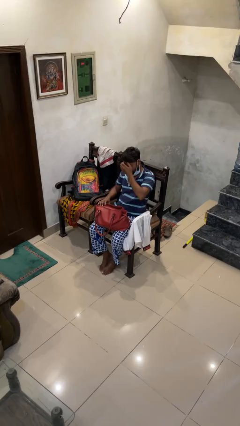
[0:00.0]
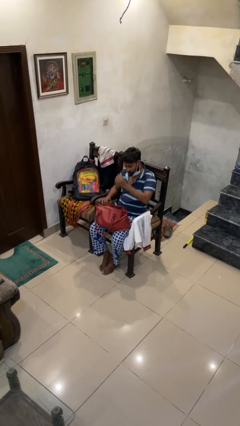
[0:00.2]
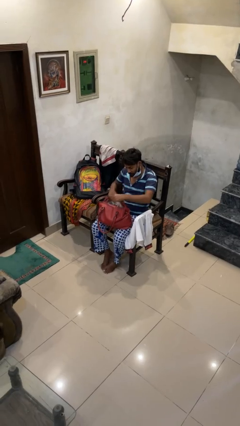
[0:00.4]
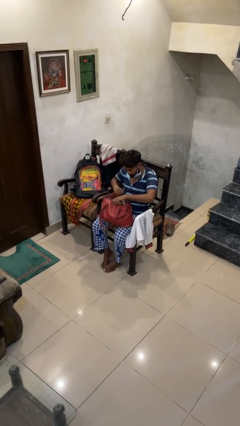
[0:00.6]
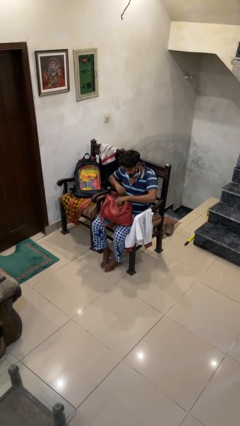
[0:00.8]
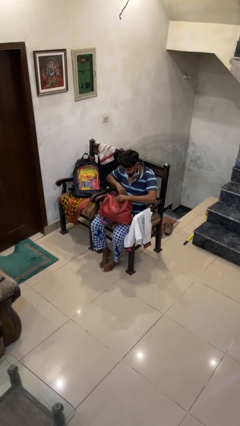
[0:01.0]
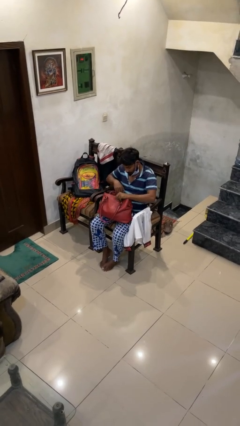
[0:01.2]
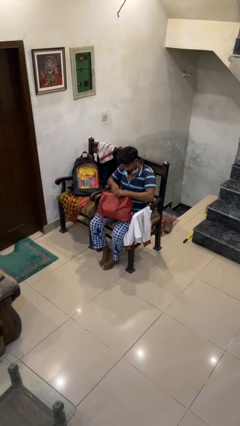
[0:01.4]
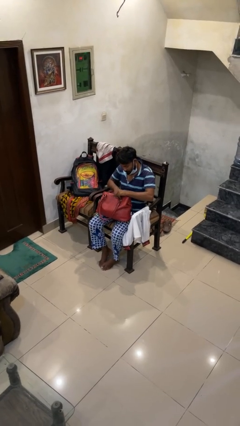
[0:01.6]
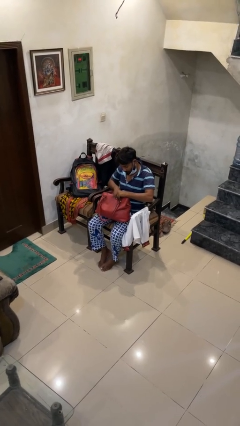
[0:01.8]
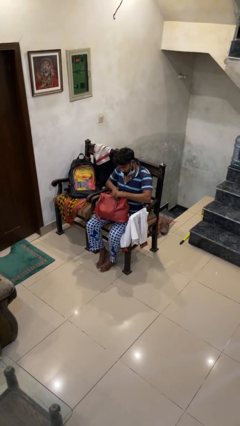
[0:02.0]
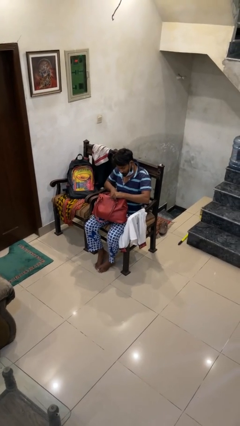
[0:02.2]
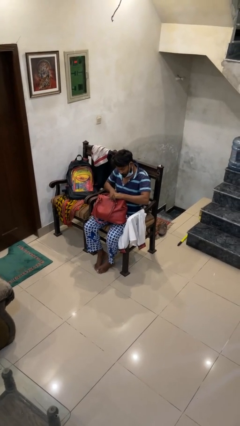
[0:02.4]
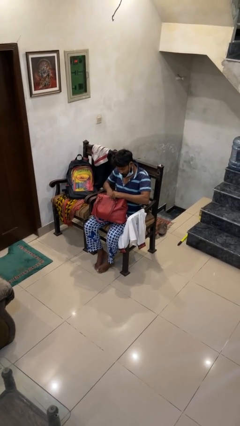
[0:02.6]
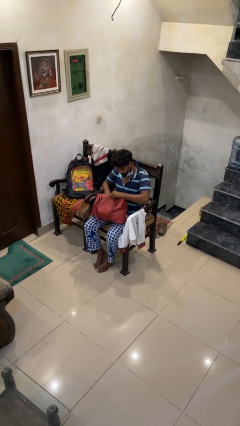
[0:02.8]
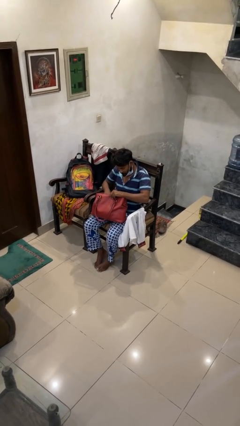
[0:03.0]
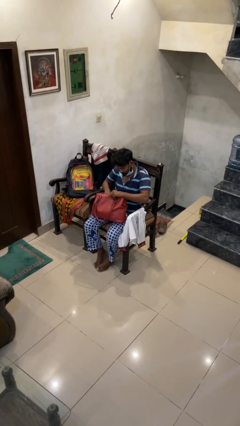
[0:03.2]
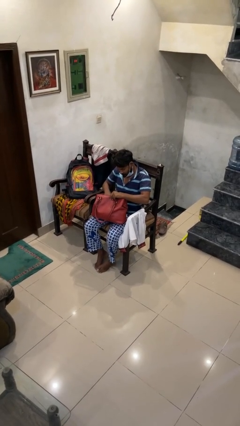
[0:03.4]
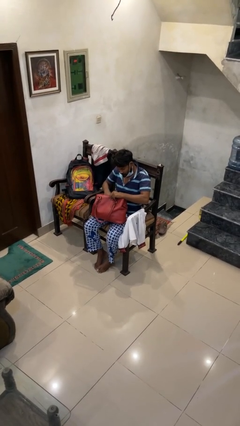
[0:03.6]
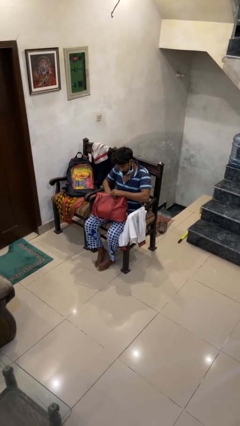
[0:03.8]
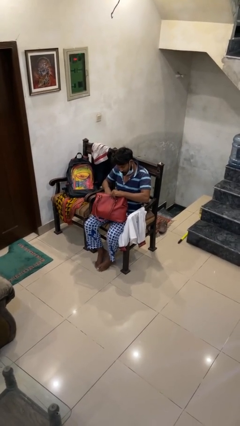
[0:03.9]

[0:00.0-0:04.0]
person searches in purse

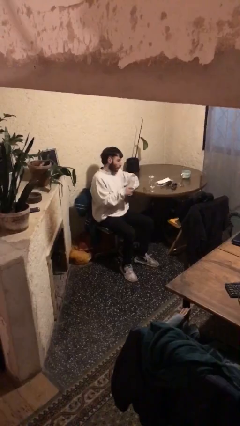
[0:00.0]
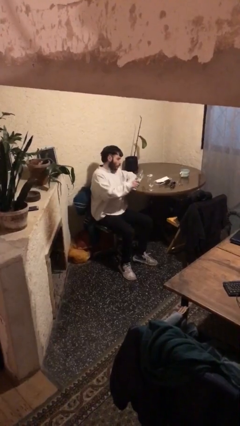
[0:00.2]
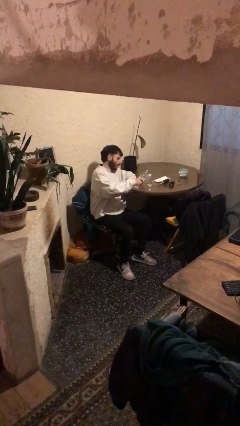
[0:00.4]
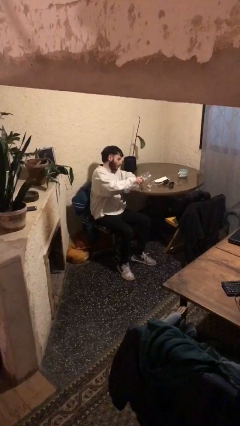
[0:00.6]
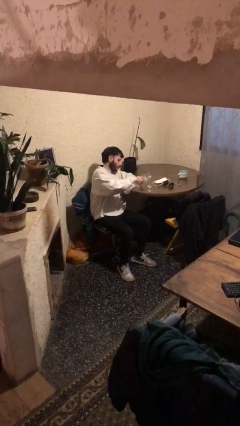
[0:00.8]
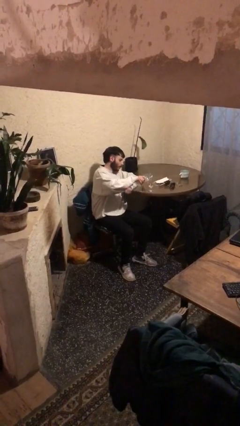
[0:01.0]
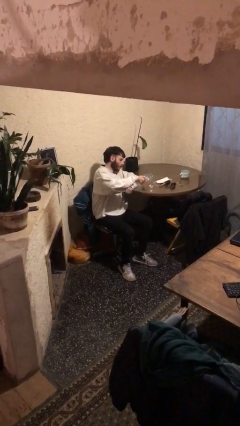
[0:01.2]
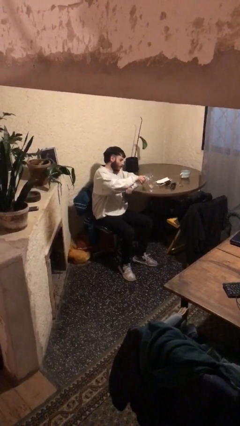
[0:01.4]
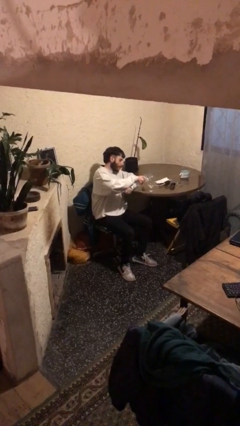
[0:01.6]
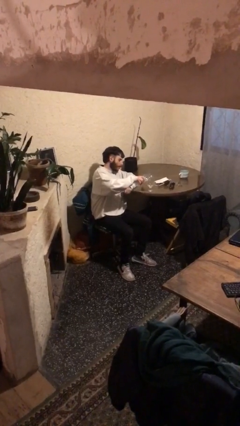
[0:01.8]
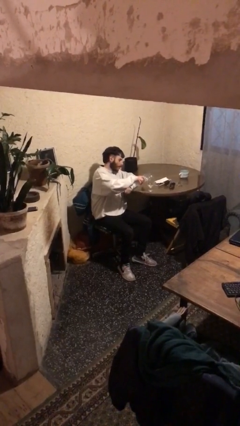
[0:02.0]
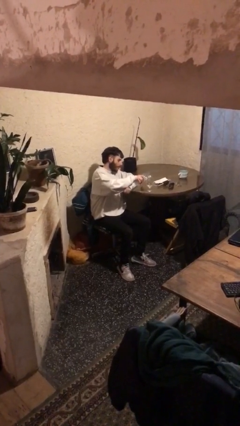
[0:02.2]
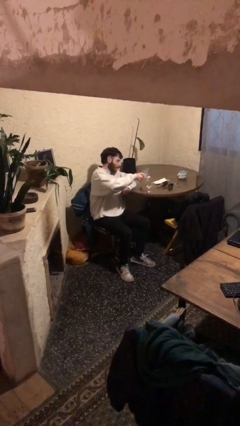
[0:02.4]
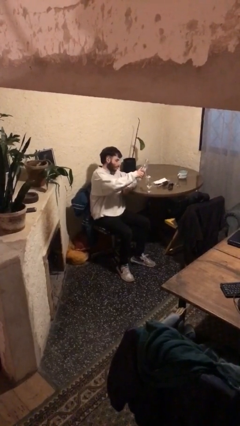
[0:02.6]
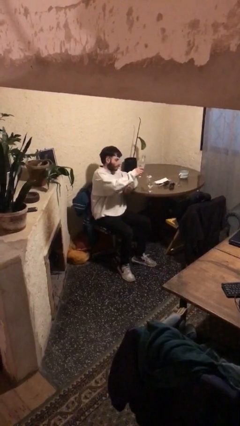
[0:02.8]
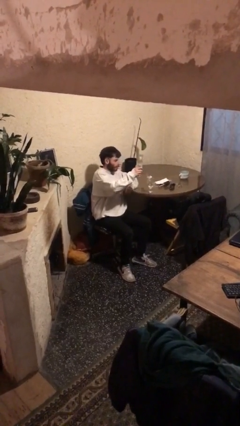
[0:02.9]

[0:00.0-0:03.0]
person pours liquid into cup

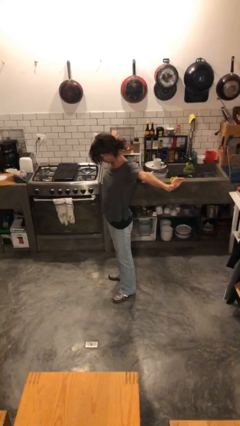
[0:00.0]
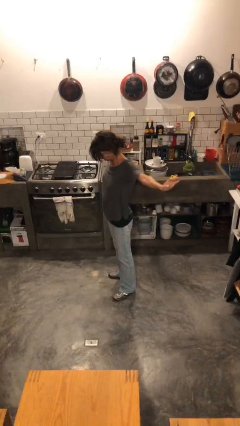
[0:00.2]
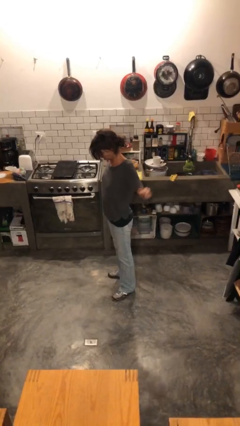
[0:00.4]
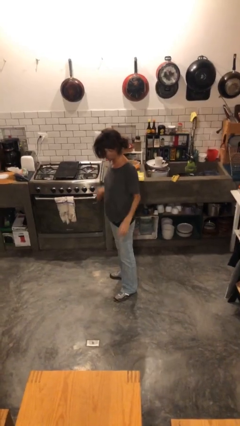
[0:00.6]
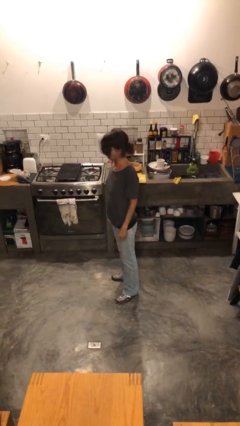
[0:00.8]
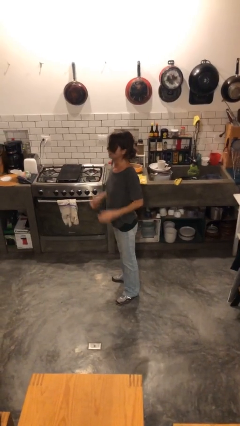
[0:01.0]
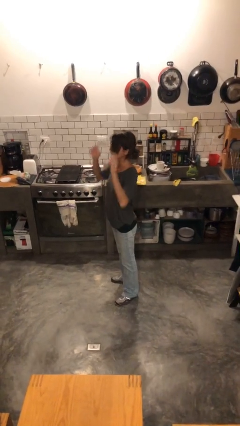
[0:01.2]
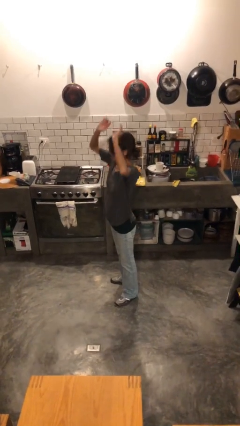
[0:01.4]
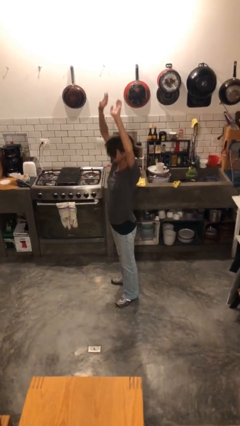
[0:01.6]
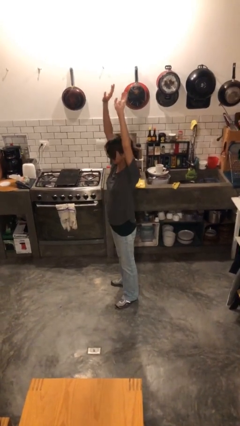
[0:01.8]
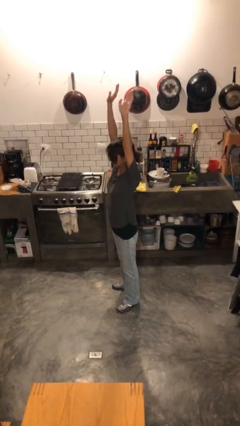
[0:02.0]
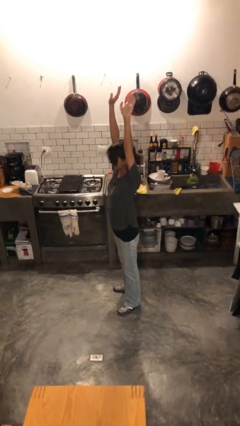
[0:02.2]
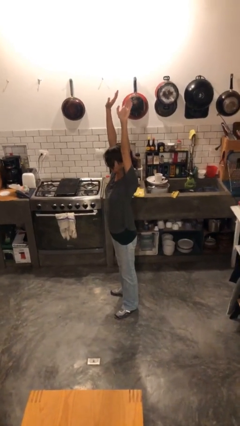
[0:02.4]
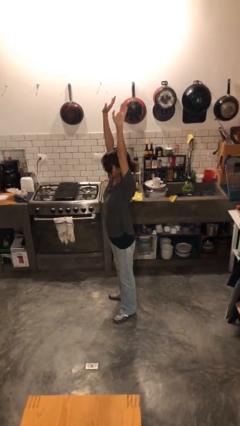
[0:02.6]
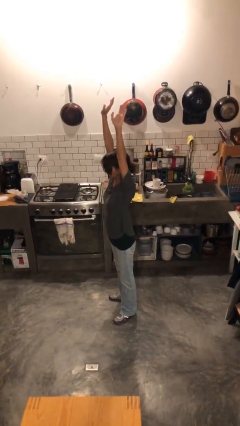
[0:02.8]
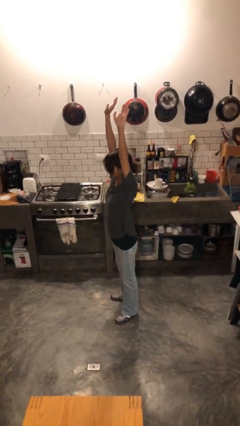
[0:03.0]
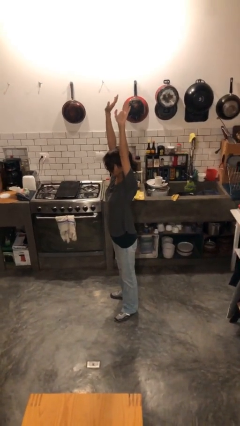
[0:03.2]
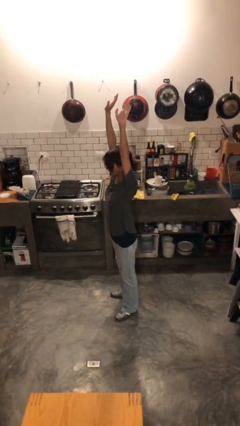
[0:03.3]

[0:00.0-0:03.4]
person stretches arms over head

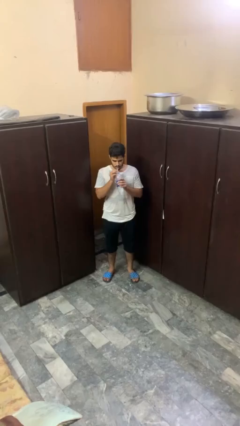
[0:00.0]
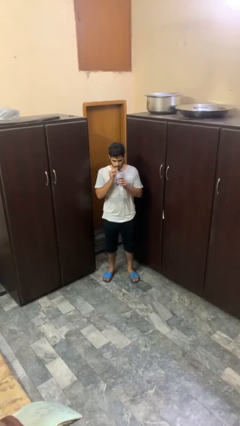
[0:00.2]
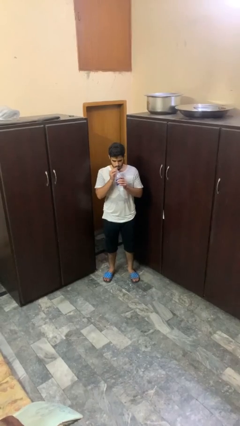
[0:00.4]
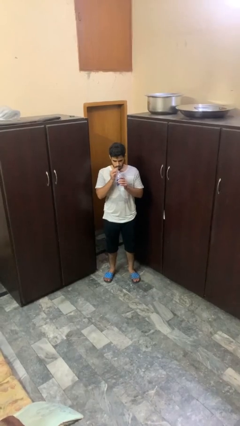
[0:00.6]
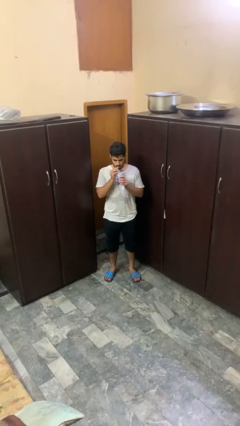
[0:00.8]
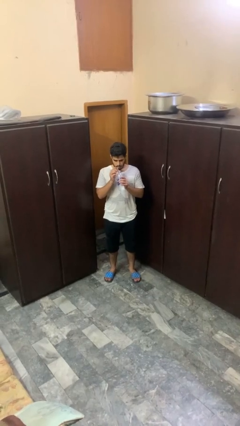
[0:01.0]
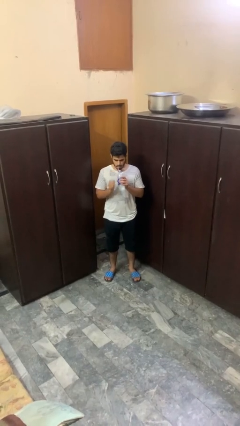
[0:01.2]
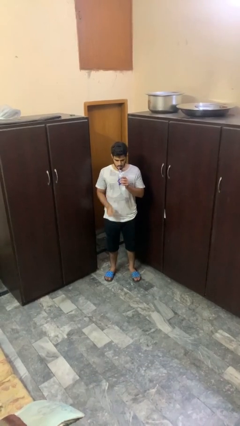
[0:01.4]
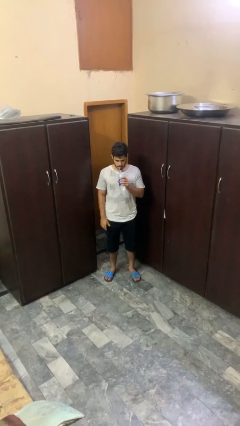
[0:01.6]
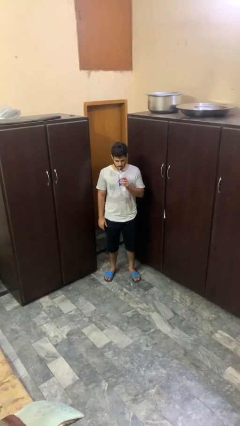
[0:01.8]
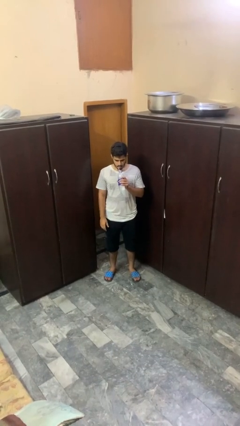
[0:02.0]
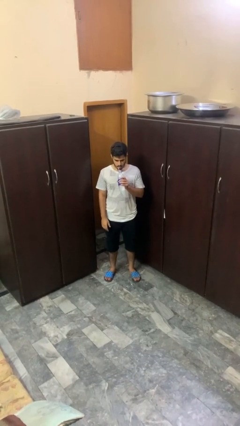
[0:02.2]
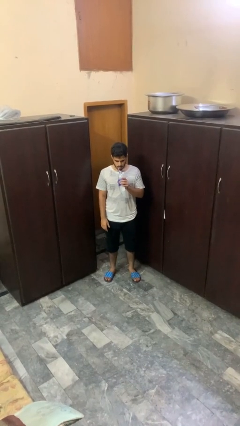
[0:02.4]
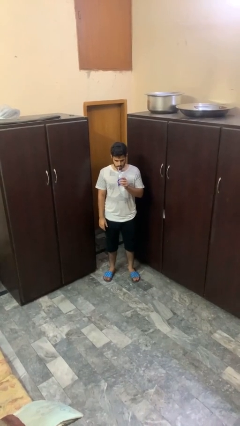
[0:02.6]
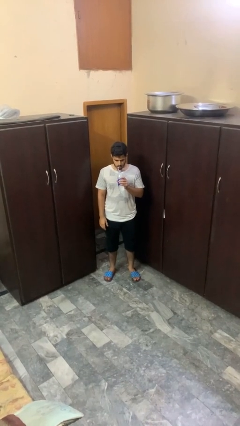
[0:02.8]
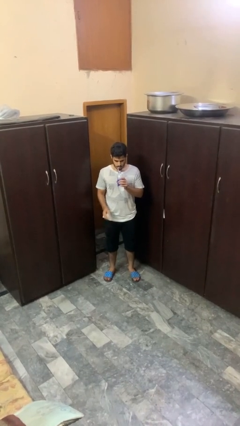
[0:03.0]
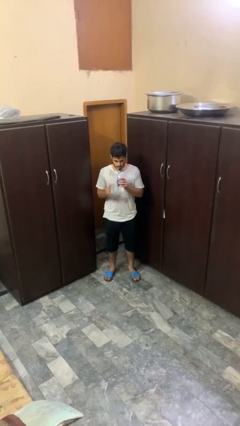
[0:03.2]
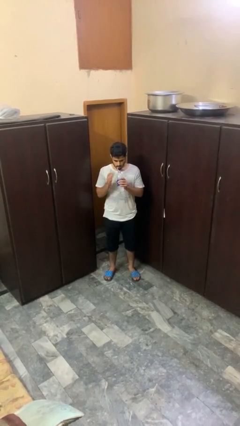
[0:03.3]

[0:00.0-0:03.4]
person drinks from straw

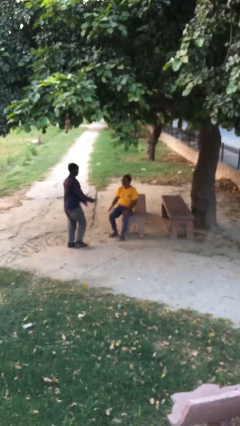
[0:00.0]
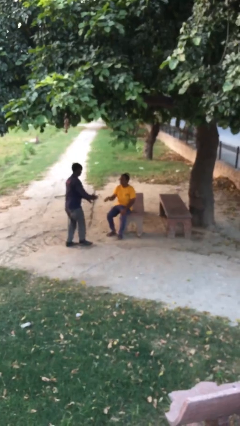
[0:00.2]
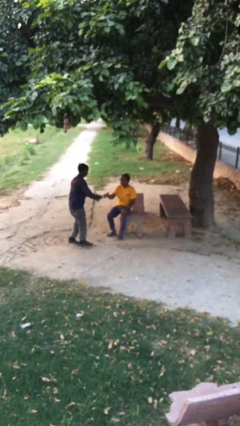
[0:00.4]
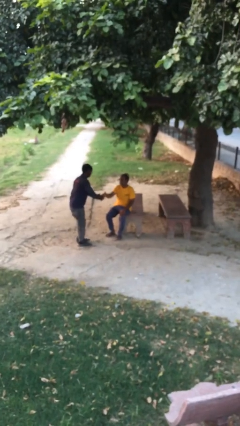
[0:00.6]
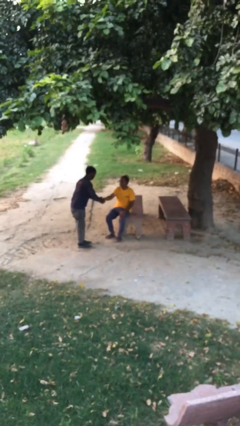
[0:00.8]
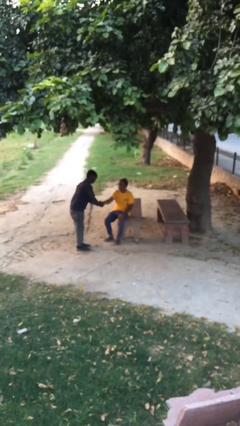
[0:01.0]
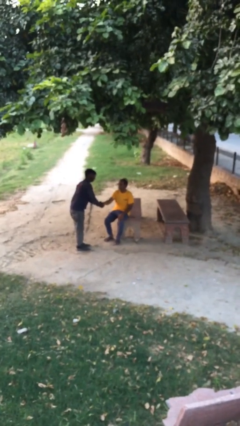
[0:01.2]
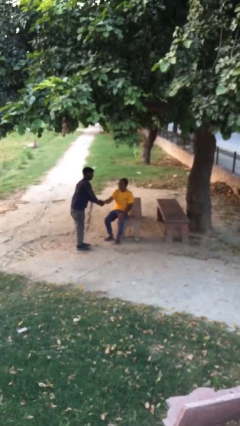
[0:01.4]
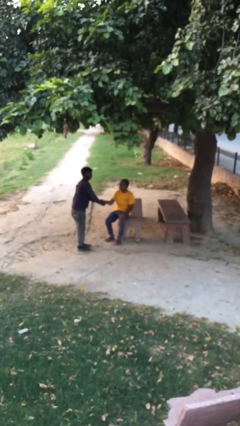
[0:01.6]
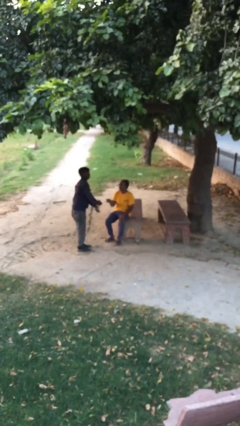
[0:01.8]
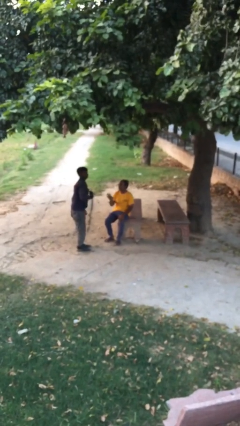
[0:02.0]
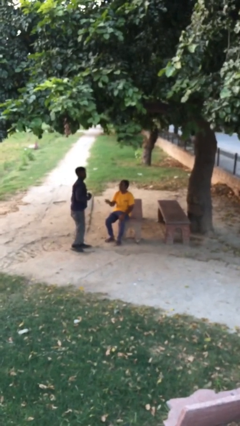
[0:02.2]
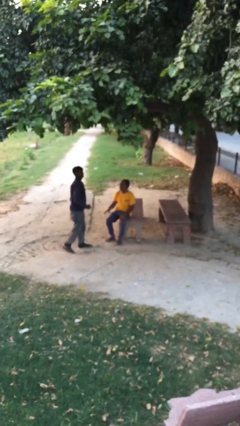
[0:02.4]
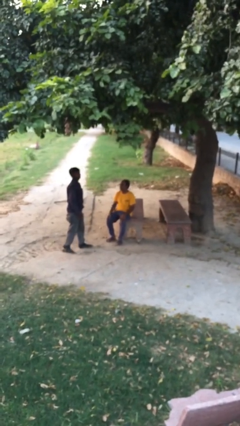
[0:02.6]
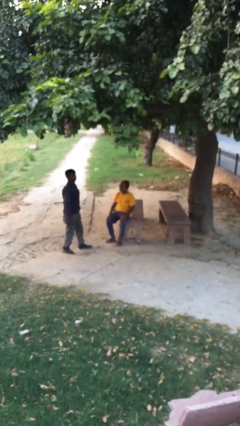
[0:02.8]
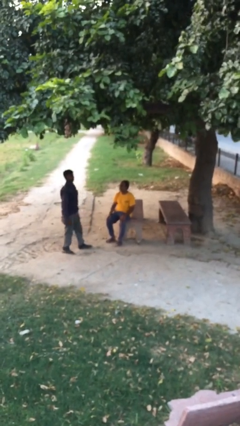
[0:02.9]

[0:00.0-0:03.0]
person shakes hand

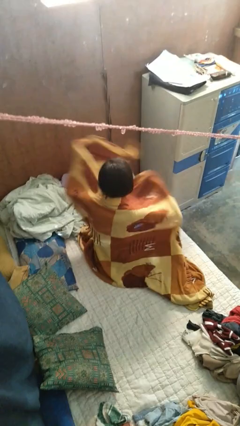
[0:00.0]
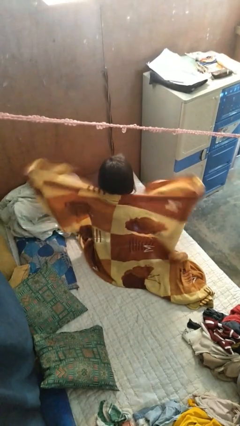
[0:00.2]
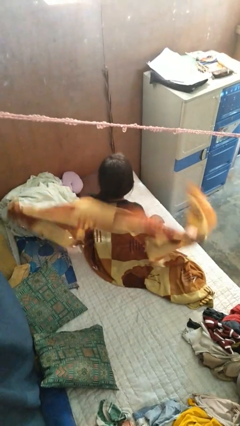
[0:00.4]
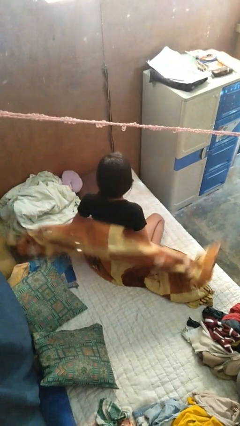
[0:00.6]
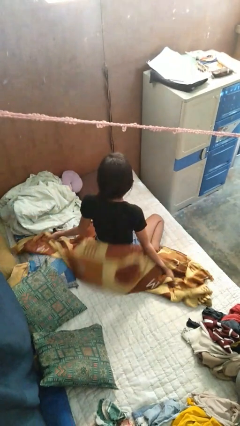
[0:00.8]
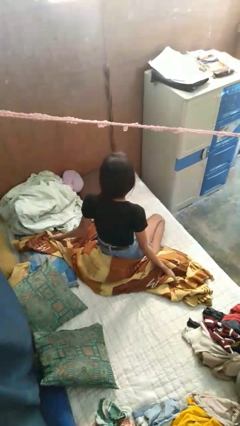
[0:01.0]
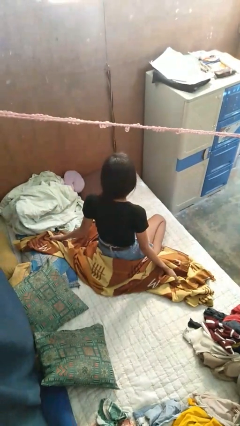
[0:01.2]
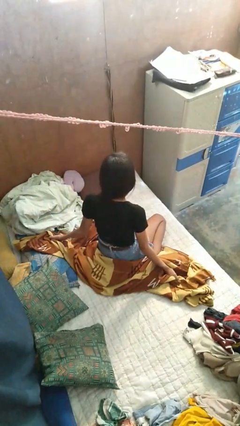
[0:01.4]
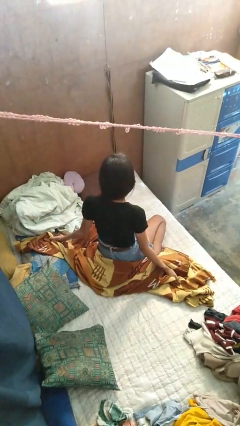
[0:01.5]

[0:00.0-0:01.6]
person uncovers with blanket
